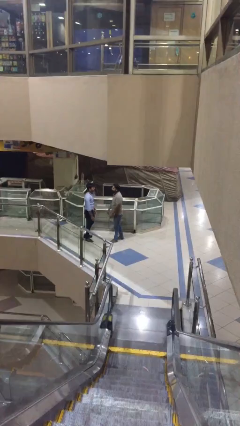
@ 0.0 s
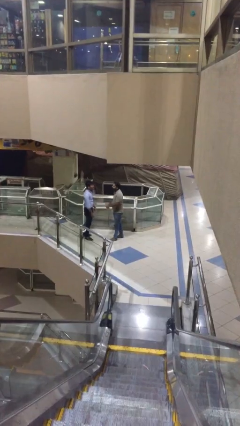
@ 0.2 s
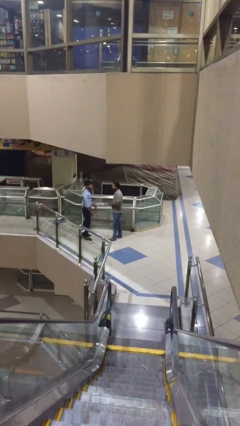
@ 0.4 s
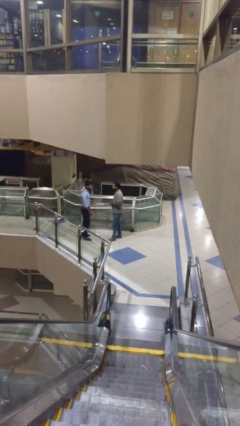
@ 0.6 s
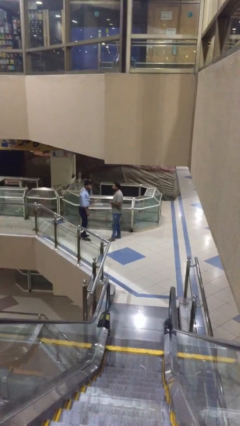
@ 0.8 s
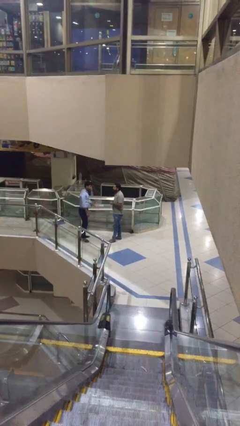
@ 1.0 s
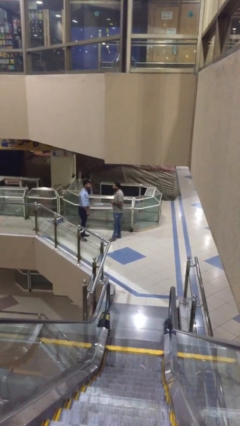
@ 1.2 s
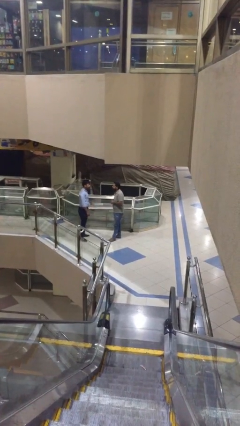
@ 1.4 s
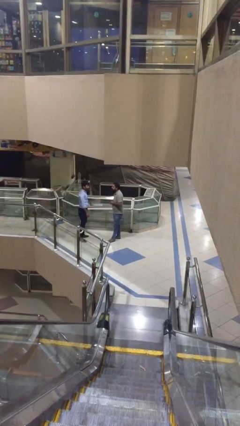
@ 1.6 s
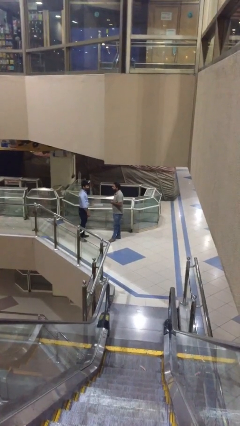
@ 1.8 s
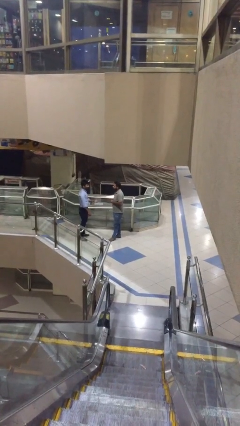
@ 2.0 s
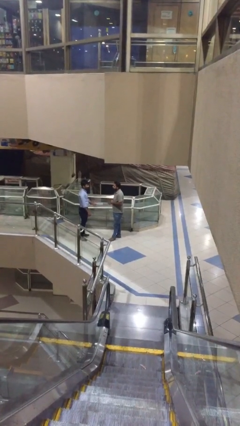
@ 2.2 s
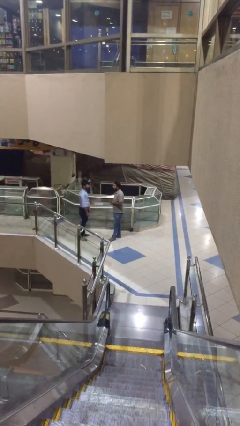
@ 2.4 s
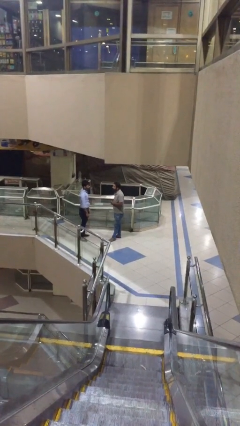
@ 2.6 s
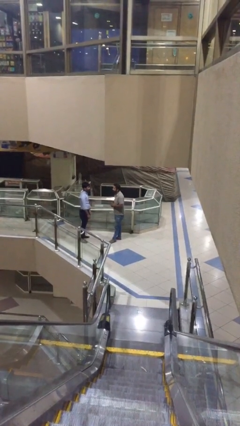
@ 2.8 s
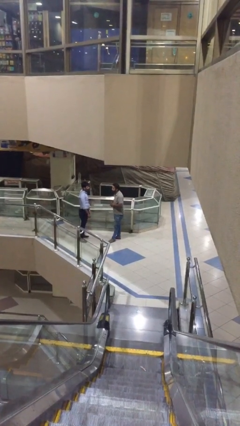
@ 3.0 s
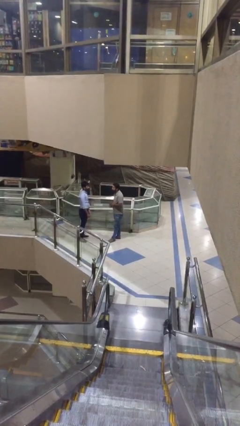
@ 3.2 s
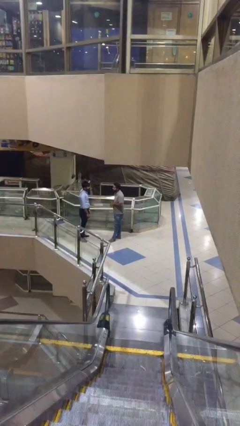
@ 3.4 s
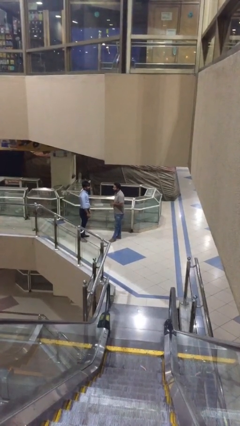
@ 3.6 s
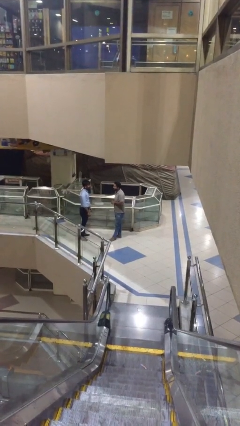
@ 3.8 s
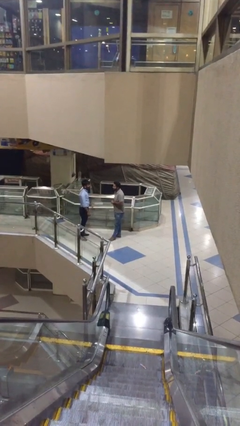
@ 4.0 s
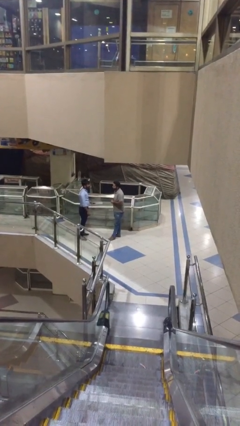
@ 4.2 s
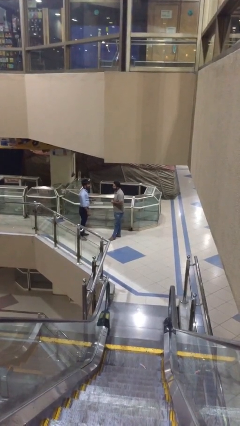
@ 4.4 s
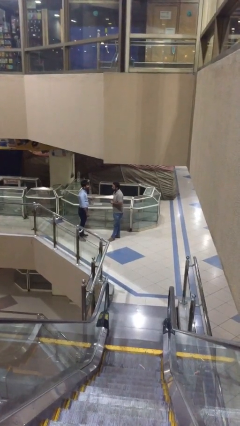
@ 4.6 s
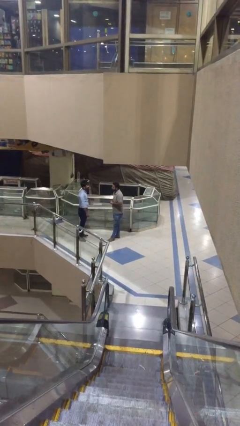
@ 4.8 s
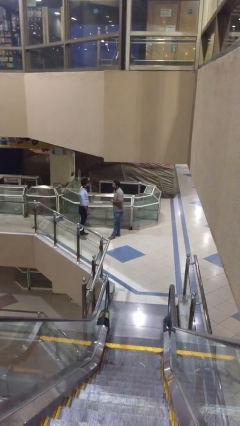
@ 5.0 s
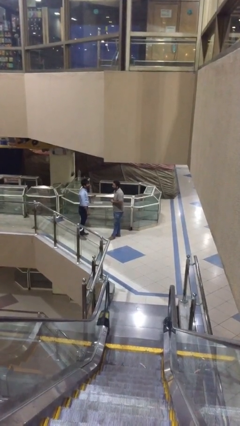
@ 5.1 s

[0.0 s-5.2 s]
person talks to person

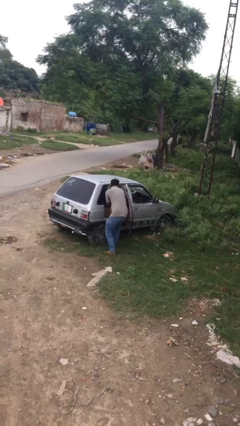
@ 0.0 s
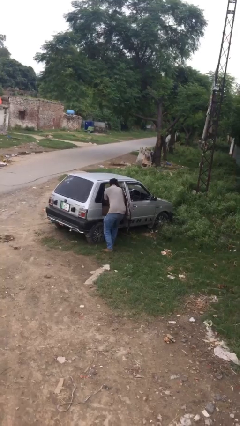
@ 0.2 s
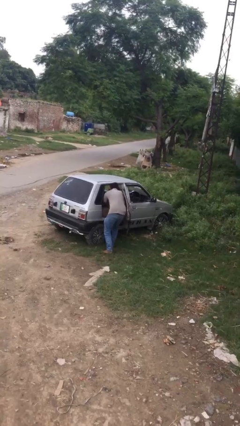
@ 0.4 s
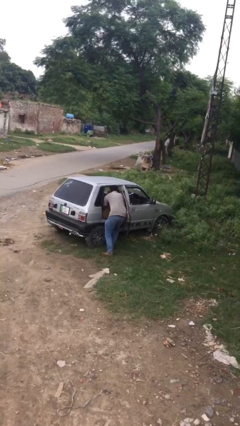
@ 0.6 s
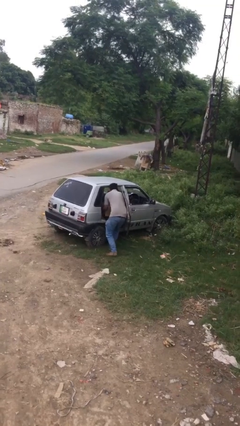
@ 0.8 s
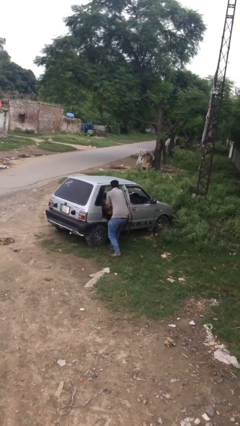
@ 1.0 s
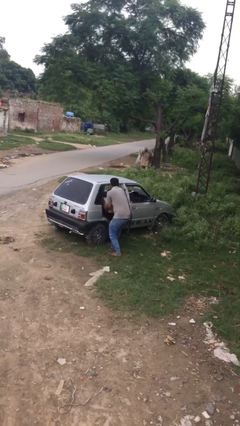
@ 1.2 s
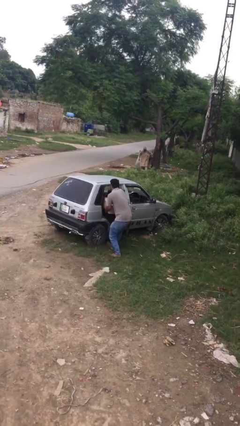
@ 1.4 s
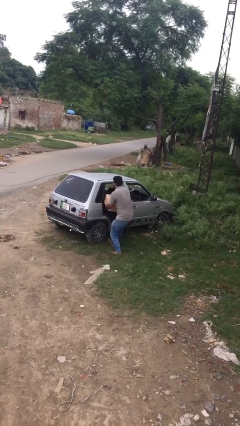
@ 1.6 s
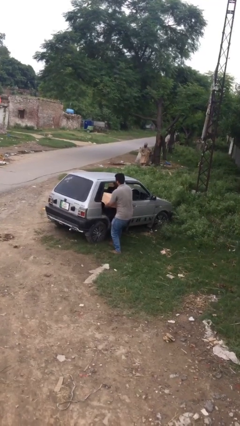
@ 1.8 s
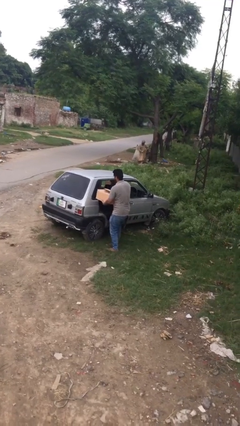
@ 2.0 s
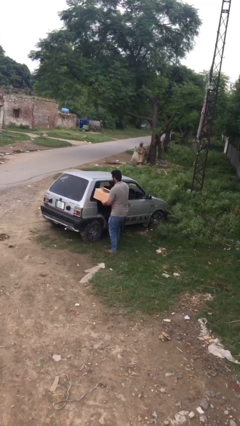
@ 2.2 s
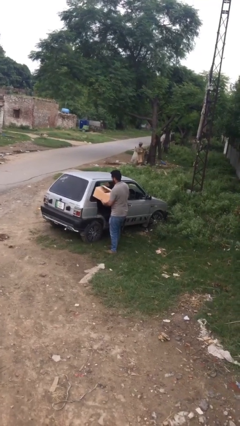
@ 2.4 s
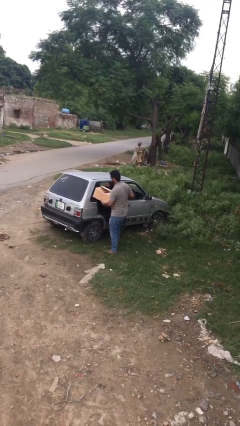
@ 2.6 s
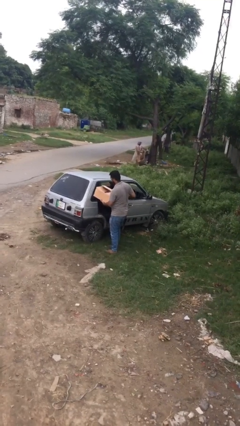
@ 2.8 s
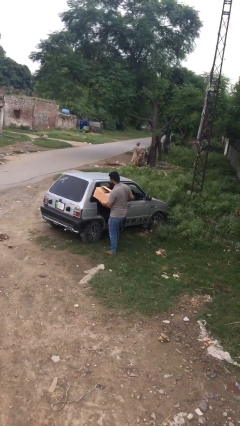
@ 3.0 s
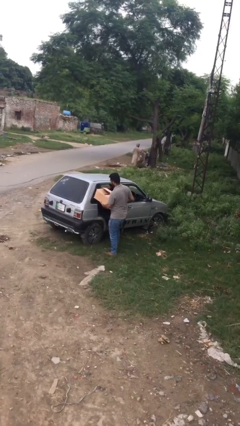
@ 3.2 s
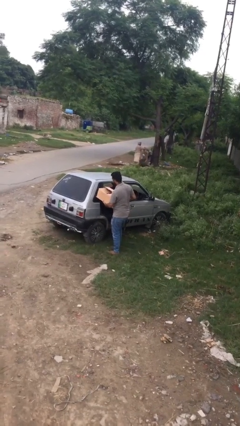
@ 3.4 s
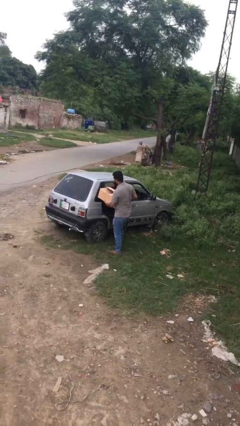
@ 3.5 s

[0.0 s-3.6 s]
person unloads car

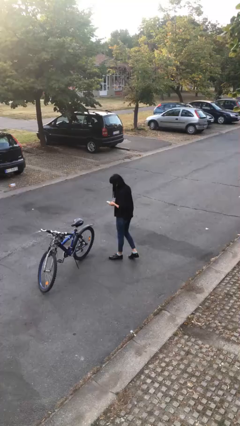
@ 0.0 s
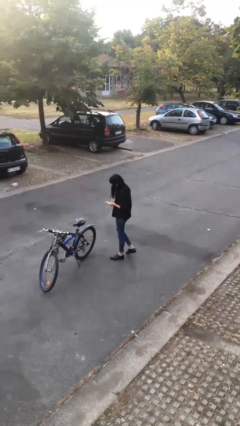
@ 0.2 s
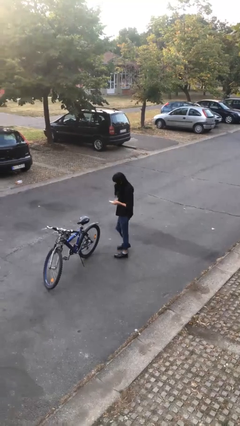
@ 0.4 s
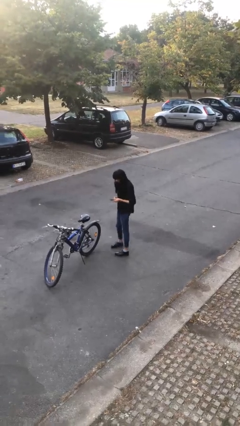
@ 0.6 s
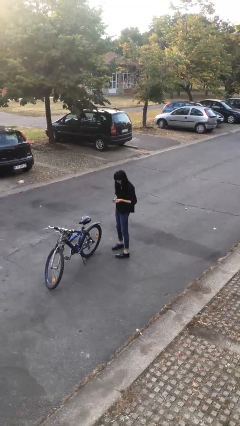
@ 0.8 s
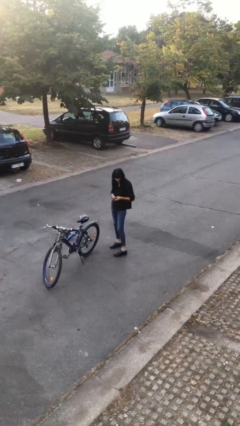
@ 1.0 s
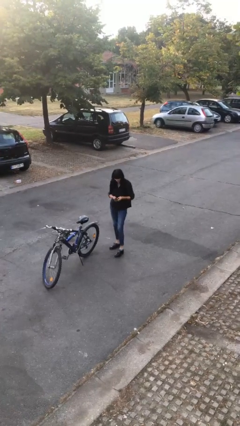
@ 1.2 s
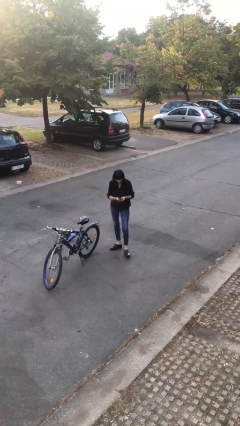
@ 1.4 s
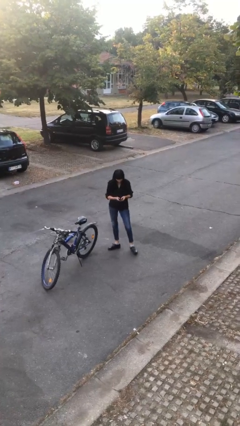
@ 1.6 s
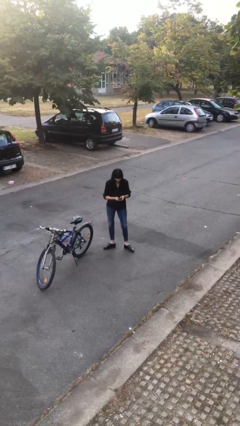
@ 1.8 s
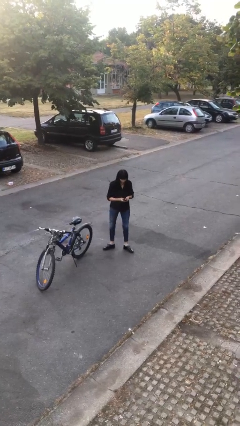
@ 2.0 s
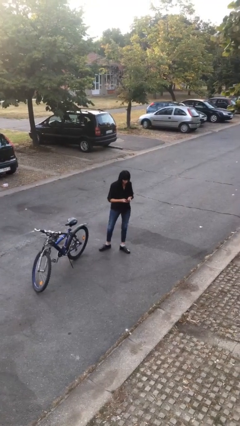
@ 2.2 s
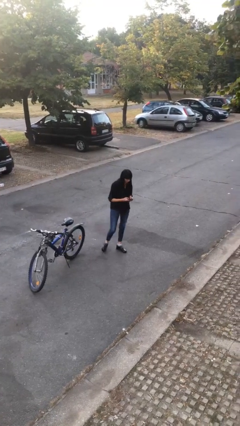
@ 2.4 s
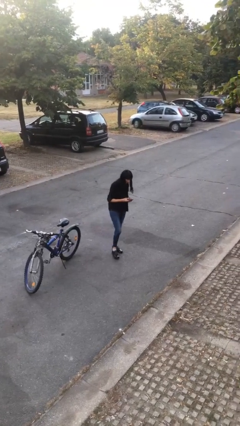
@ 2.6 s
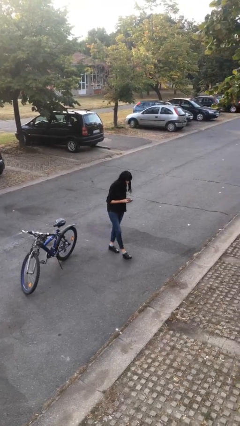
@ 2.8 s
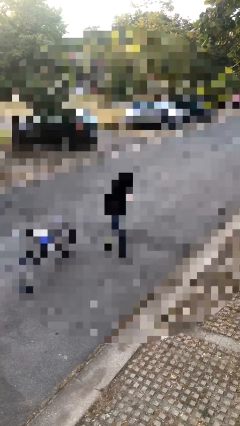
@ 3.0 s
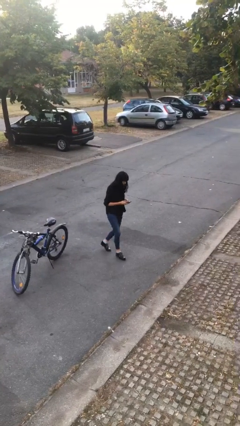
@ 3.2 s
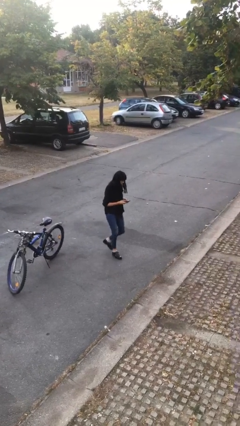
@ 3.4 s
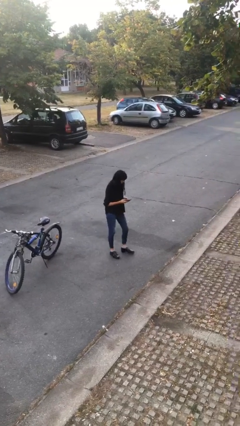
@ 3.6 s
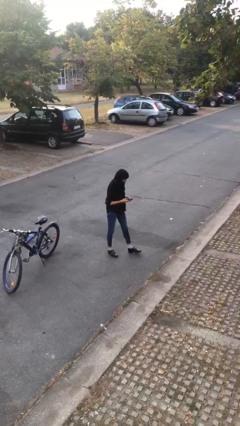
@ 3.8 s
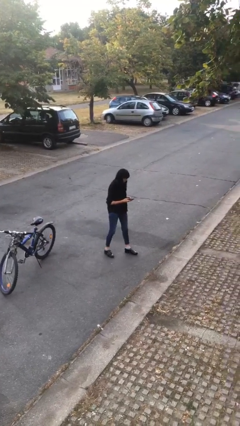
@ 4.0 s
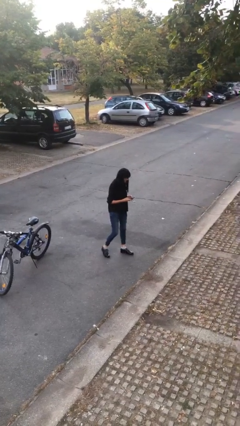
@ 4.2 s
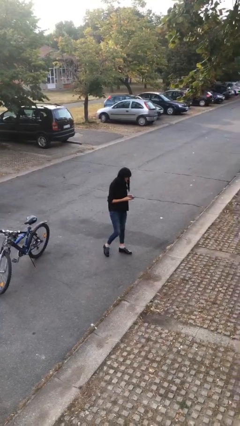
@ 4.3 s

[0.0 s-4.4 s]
person texts on phone

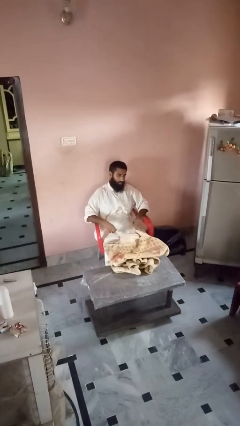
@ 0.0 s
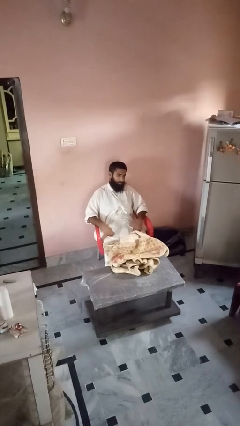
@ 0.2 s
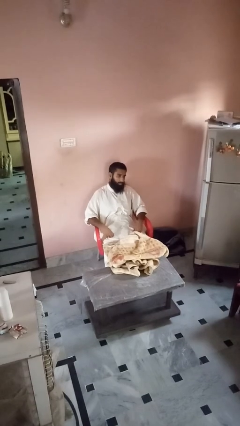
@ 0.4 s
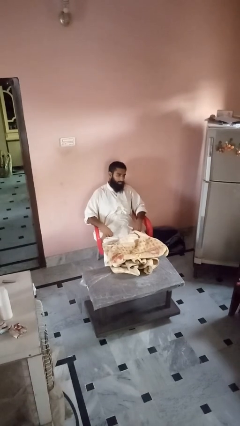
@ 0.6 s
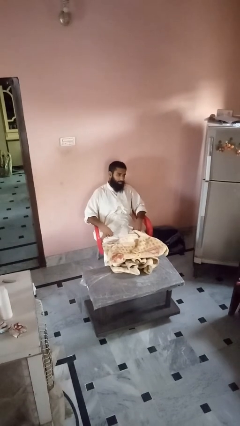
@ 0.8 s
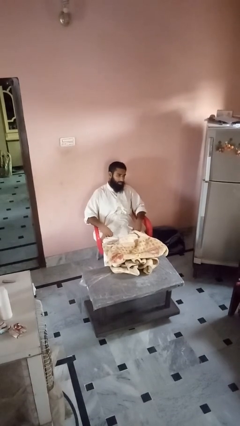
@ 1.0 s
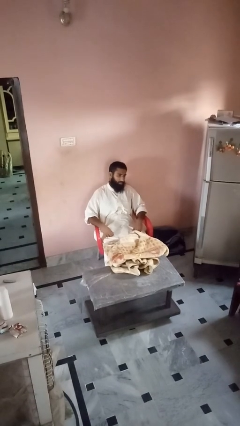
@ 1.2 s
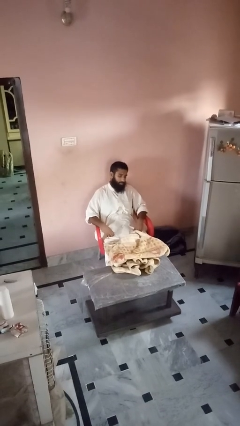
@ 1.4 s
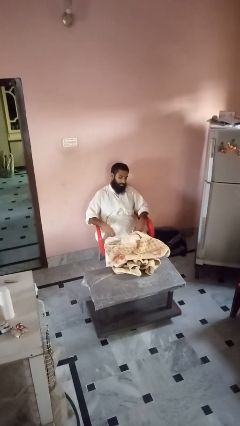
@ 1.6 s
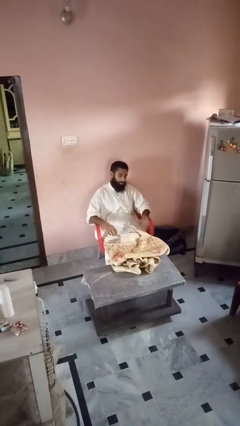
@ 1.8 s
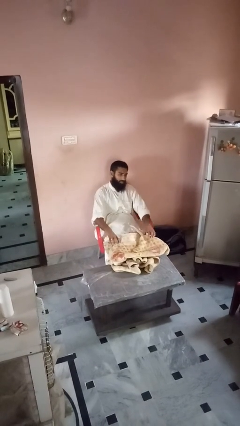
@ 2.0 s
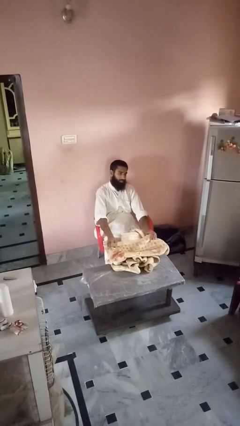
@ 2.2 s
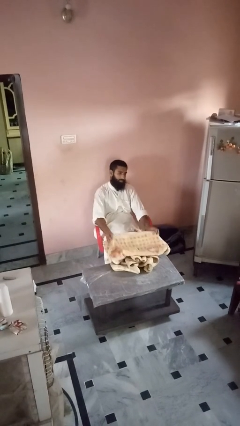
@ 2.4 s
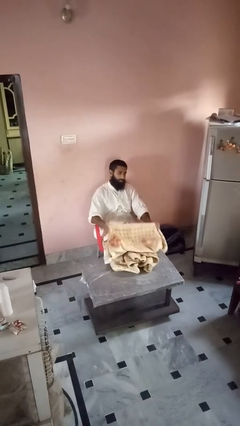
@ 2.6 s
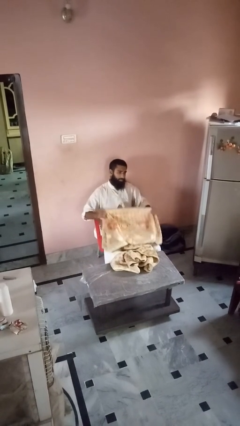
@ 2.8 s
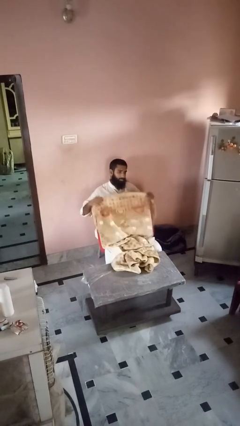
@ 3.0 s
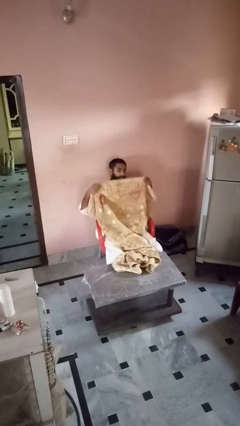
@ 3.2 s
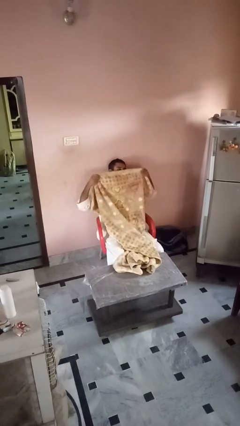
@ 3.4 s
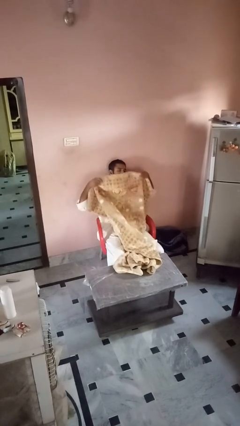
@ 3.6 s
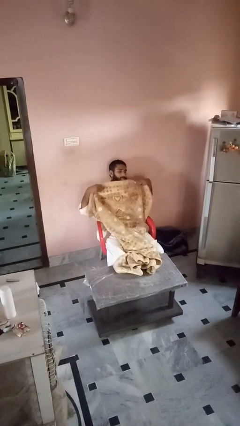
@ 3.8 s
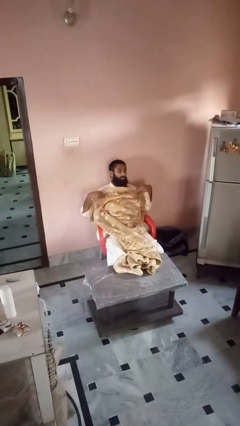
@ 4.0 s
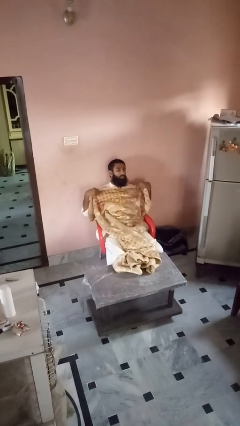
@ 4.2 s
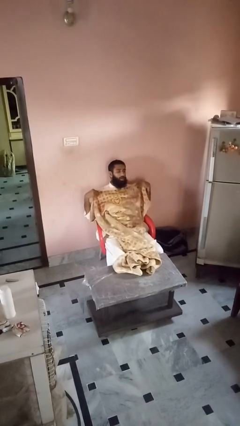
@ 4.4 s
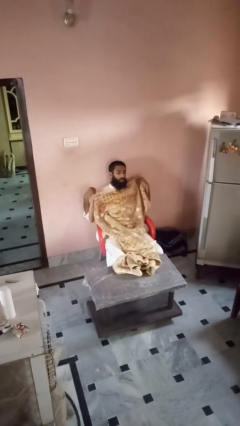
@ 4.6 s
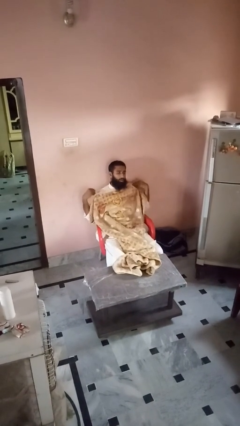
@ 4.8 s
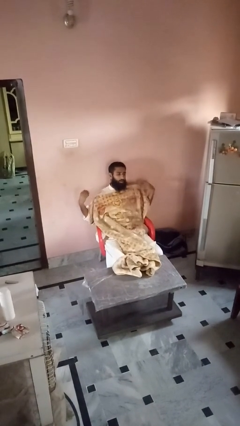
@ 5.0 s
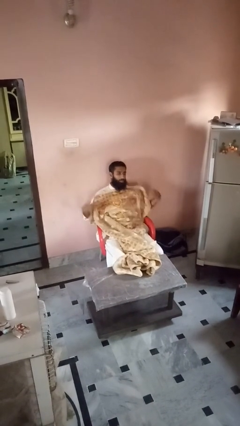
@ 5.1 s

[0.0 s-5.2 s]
person covers with blanket
